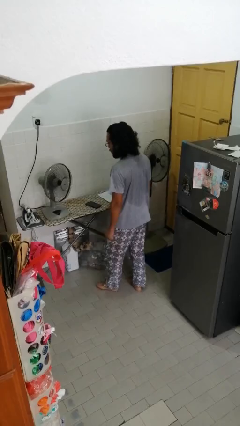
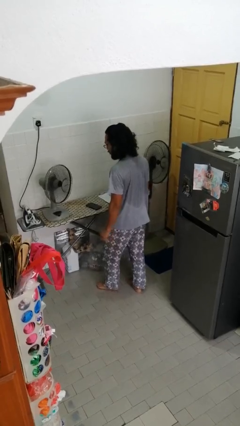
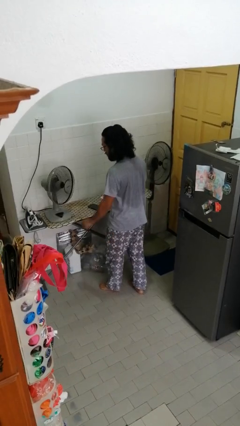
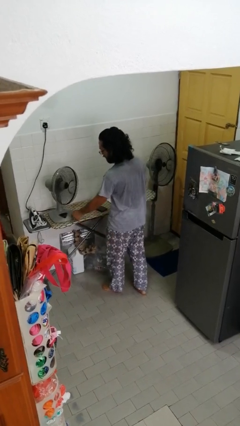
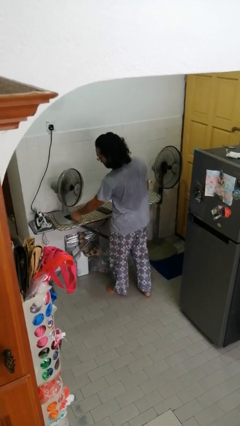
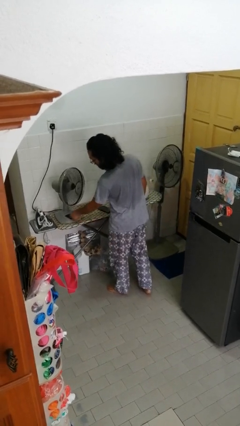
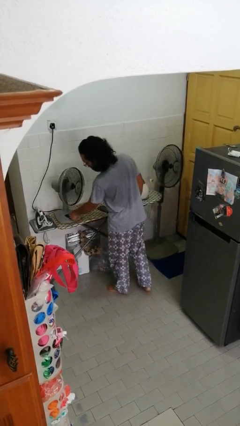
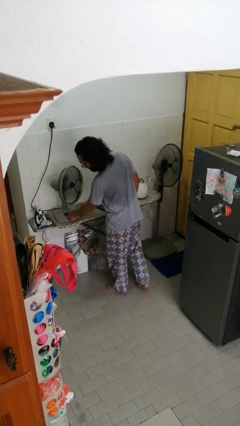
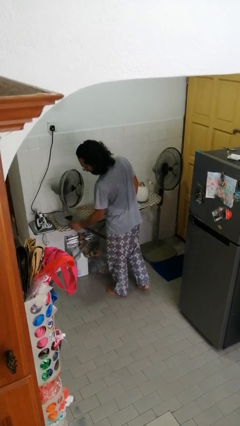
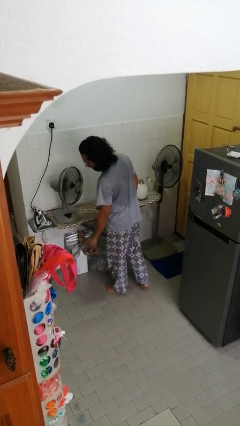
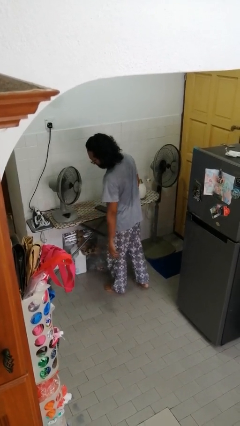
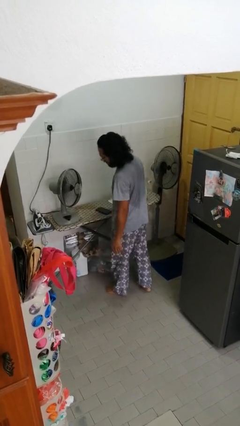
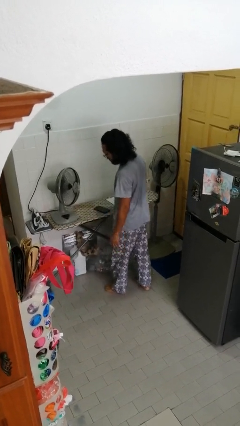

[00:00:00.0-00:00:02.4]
person turns on fan

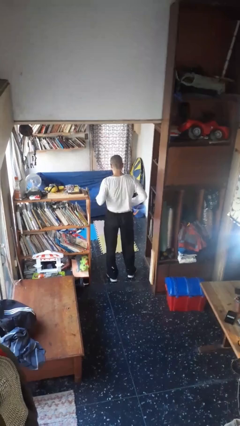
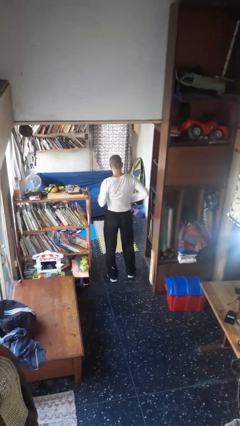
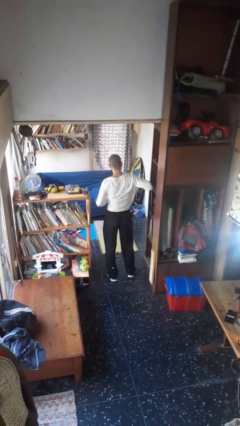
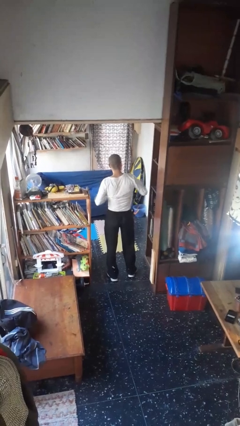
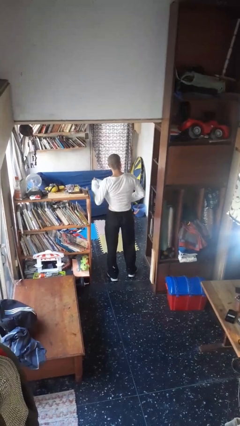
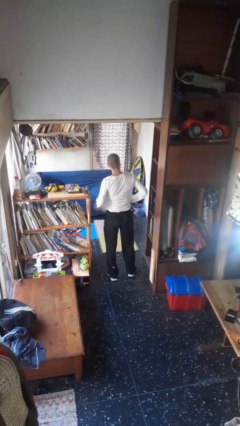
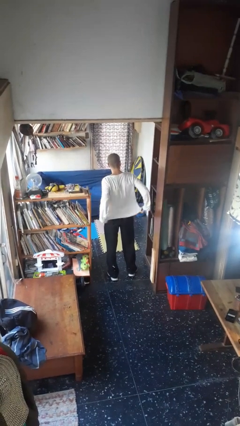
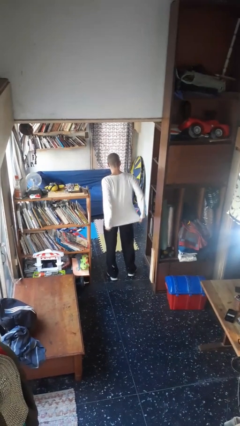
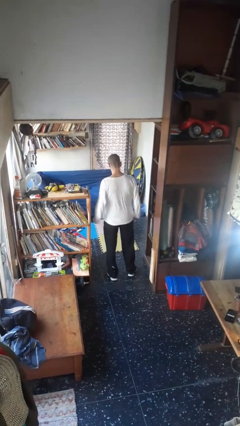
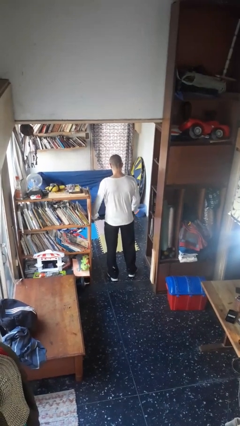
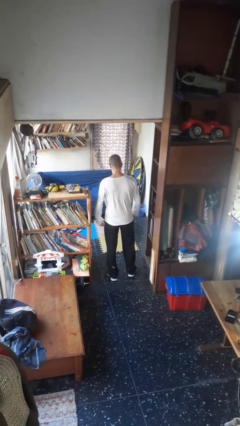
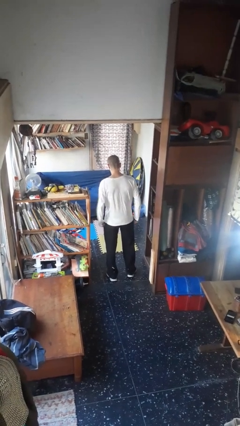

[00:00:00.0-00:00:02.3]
person untucks shirt

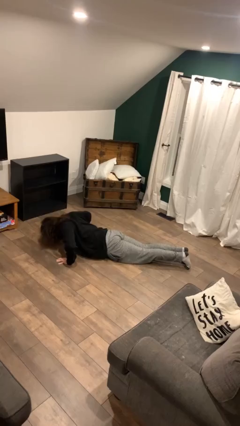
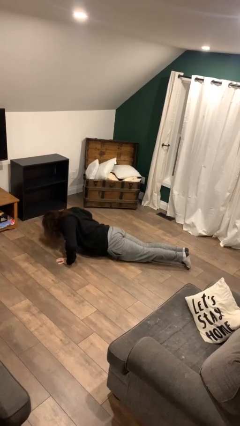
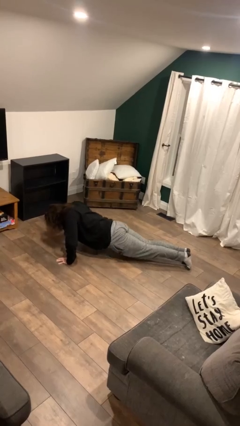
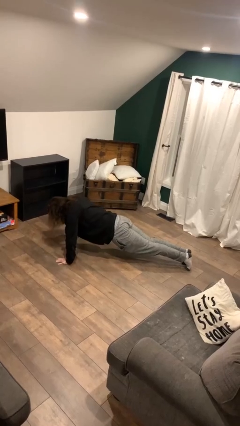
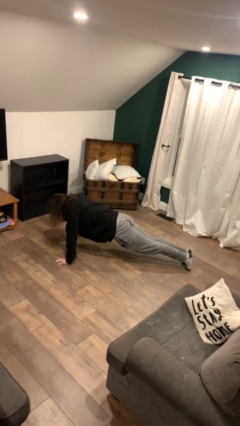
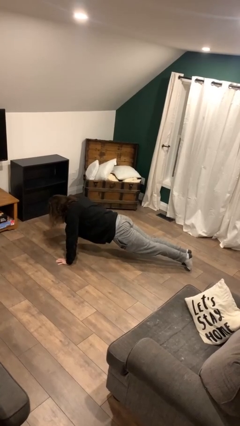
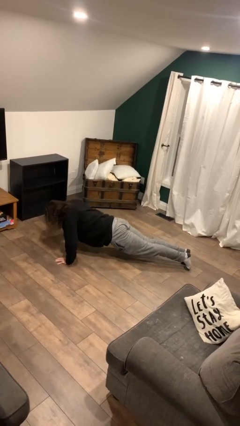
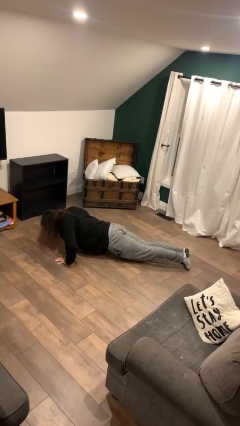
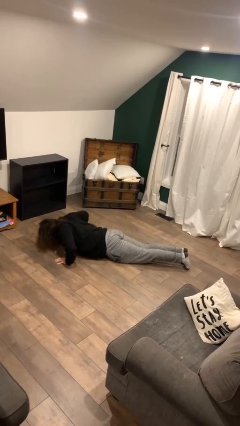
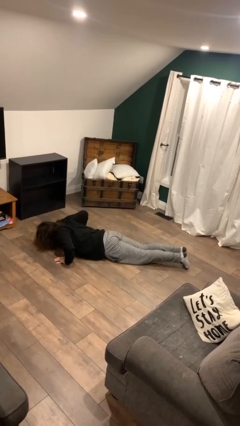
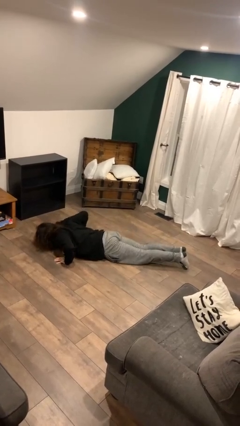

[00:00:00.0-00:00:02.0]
person exercises with pushup

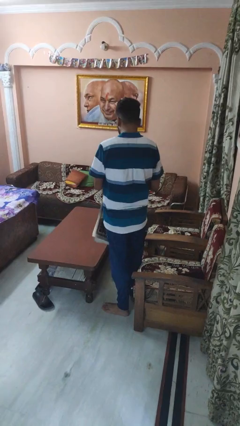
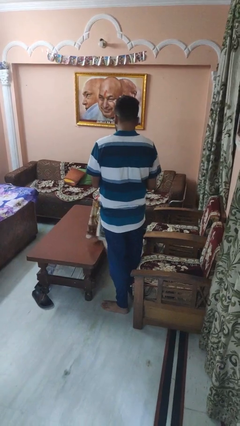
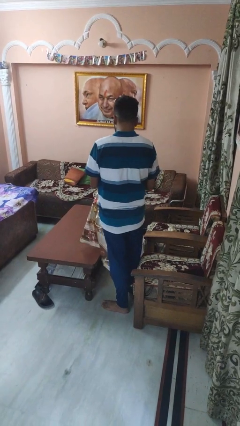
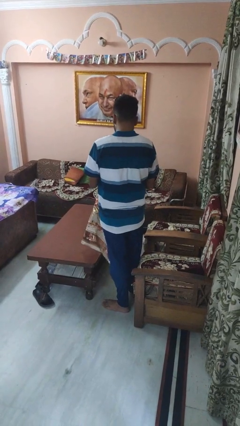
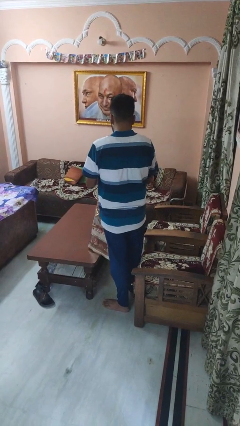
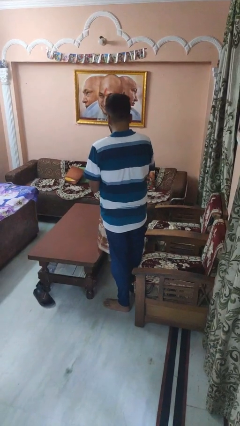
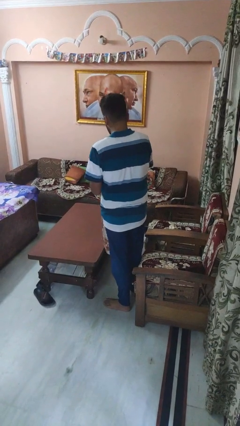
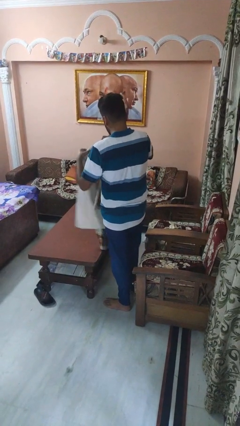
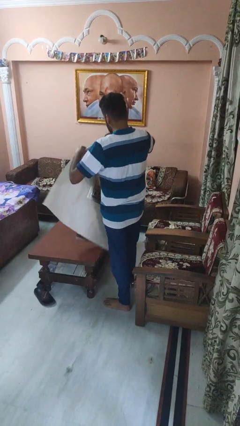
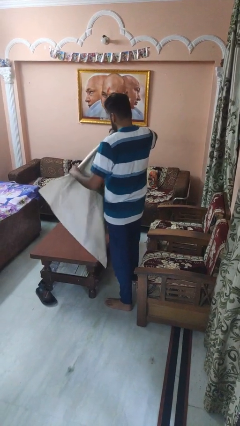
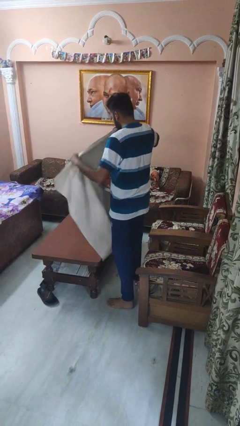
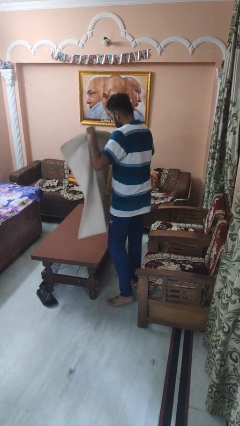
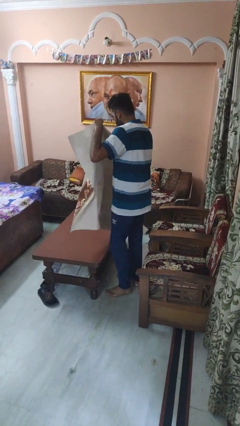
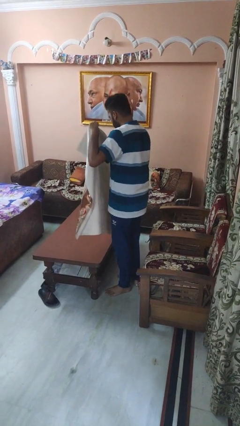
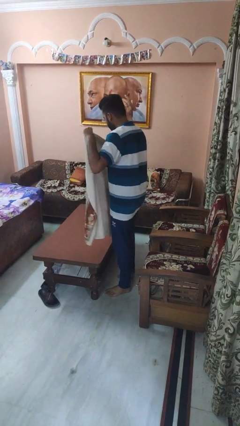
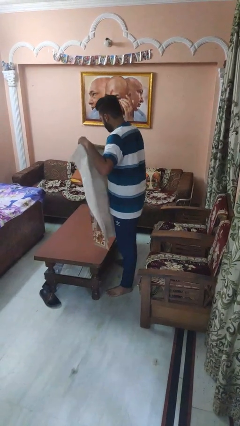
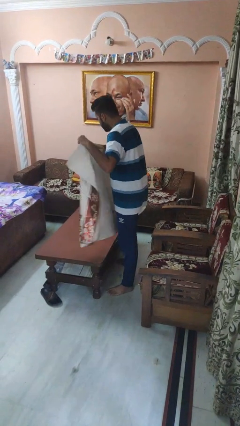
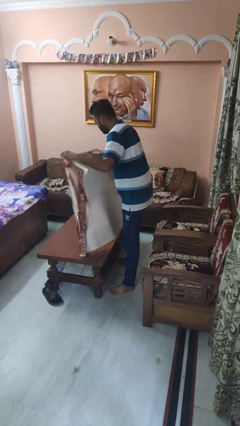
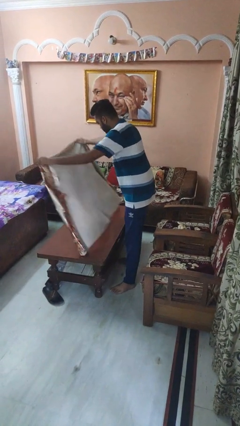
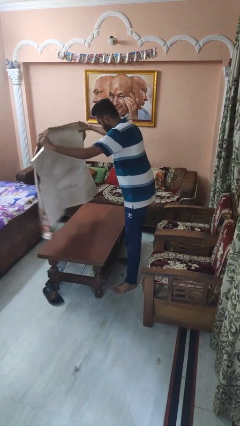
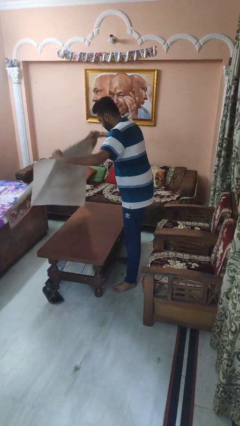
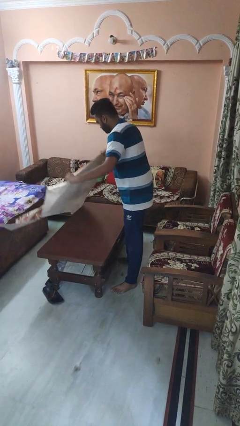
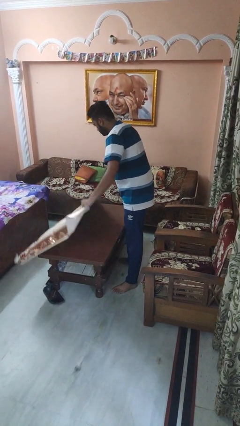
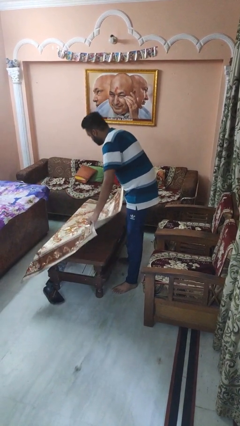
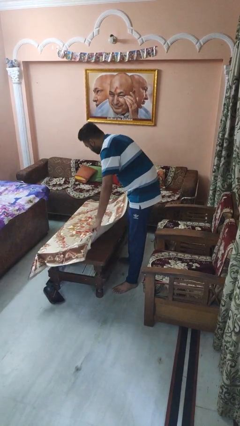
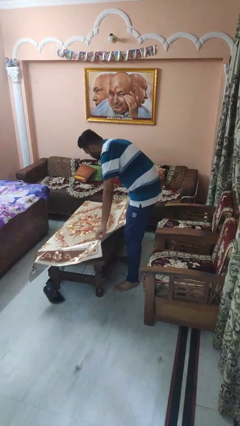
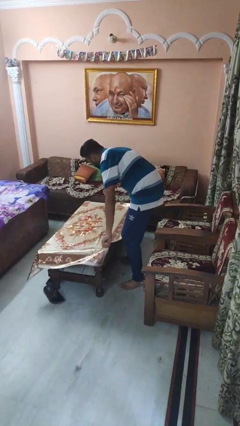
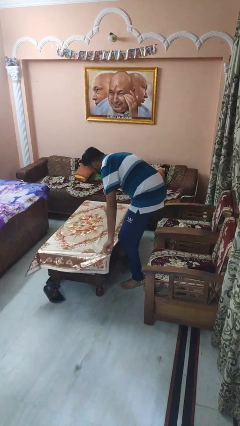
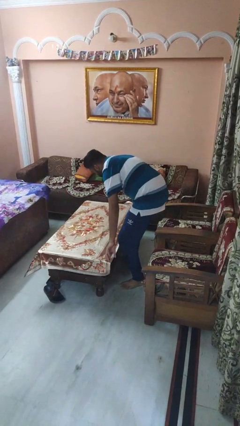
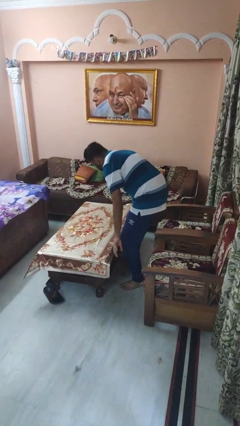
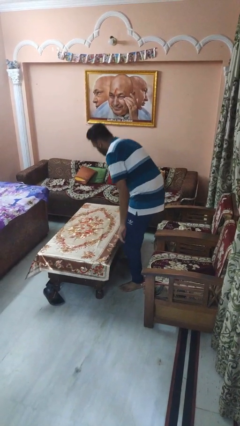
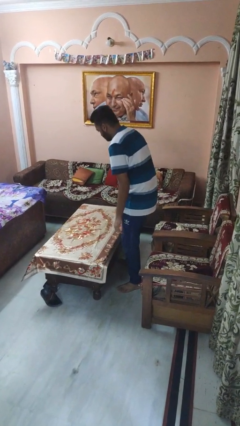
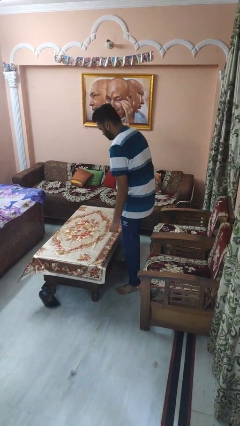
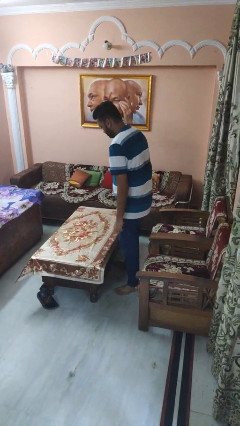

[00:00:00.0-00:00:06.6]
person spreads tablecloth

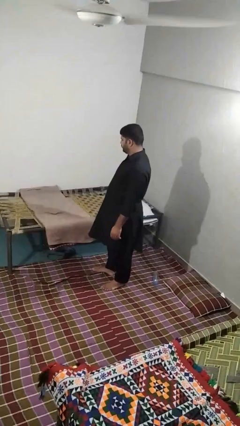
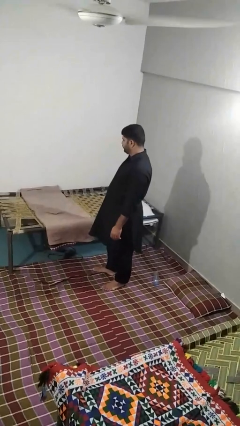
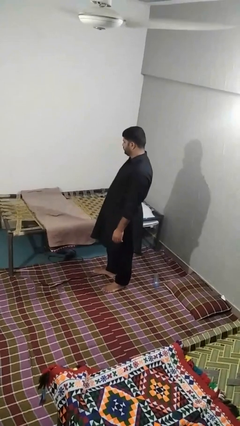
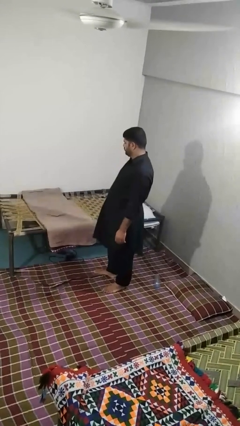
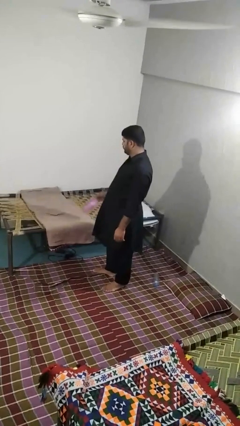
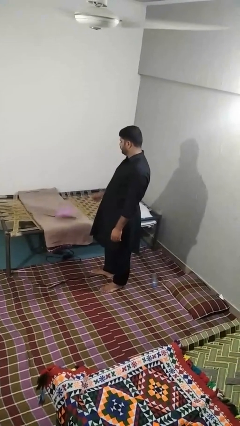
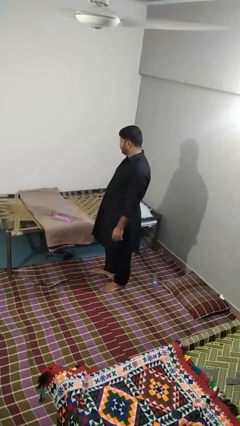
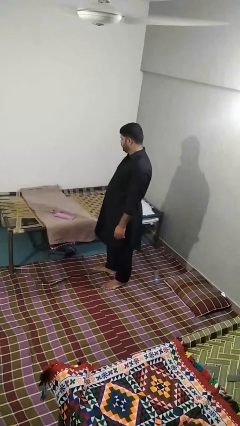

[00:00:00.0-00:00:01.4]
person puts down object on bed

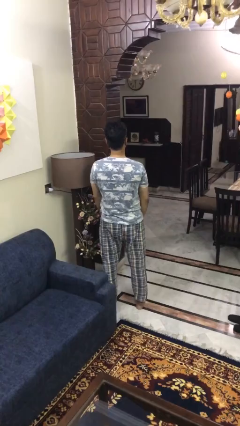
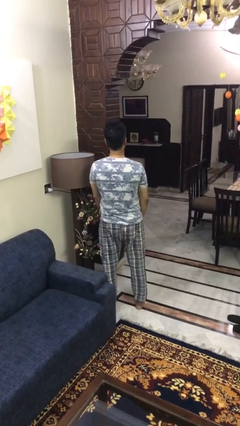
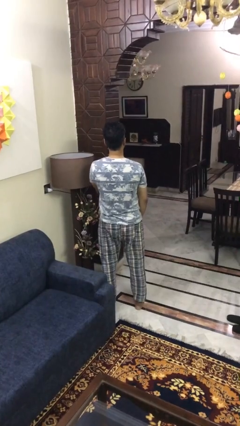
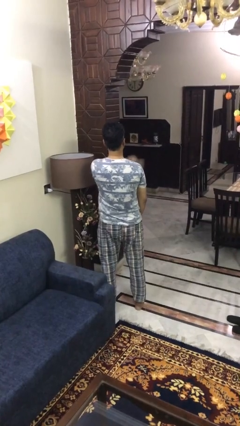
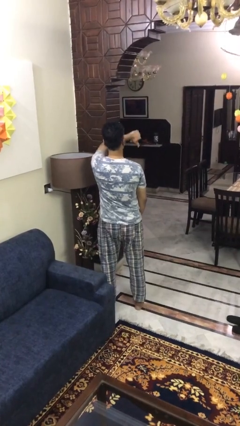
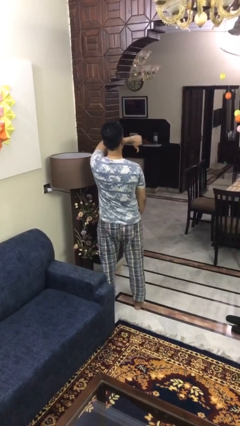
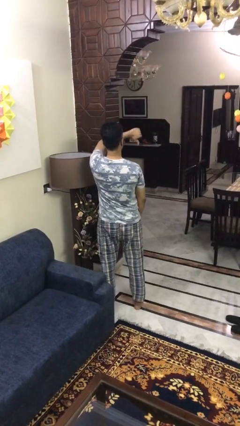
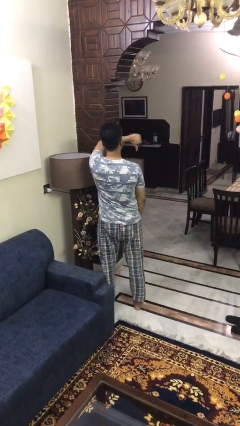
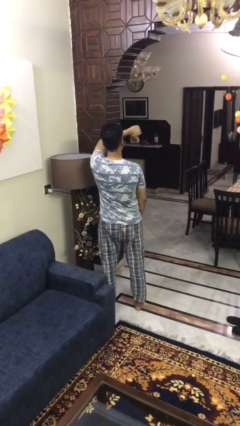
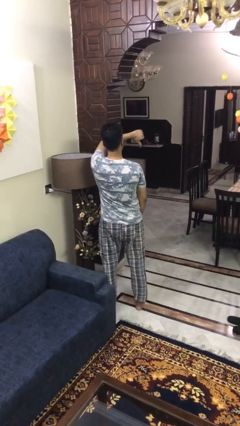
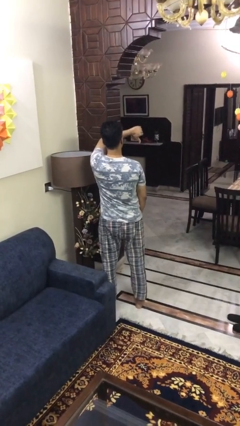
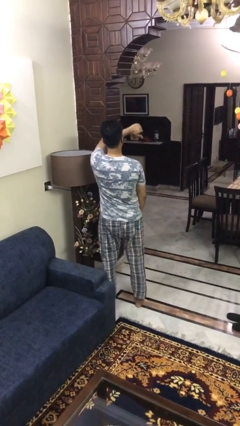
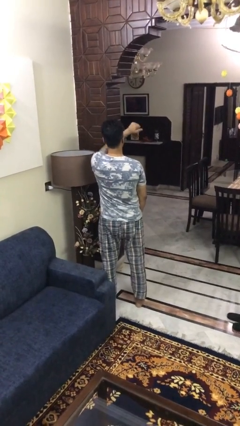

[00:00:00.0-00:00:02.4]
person gestures thumbs down
